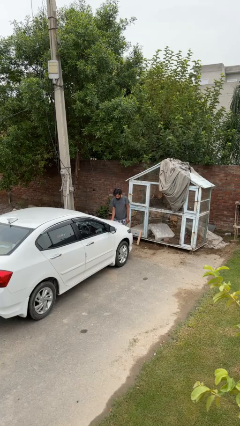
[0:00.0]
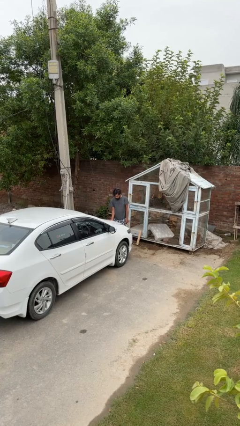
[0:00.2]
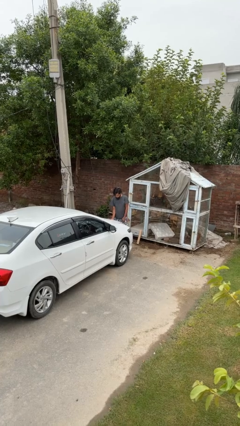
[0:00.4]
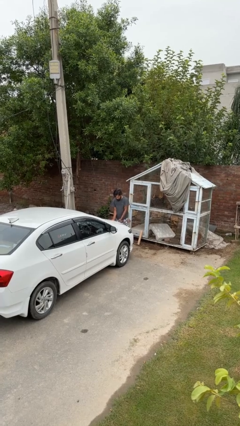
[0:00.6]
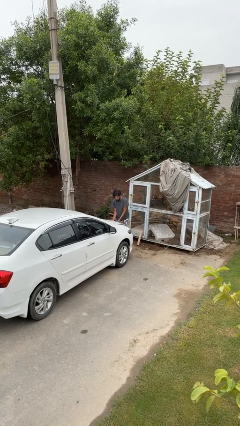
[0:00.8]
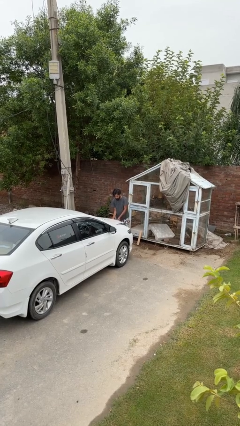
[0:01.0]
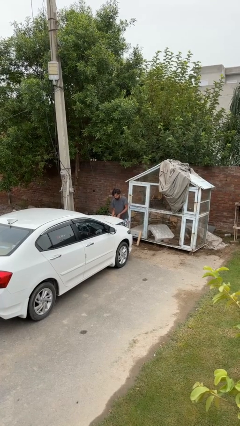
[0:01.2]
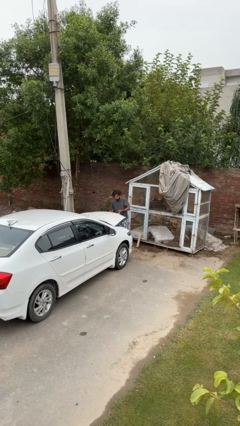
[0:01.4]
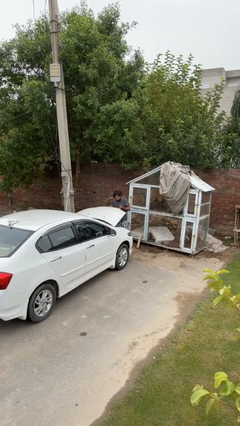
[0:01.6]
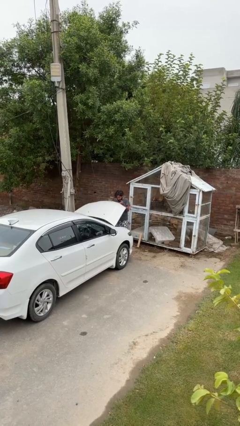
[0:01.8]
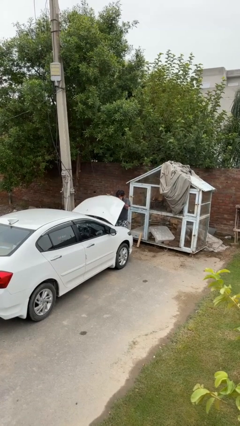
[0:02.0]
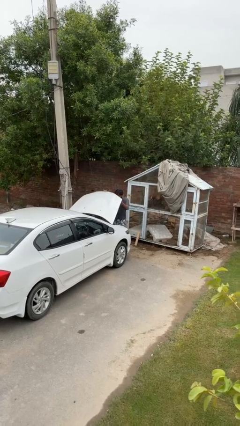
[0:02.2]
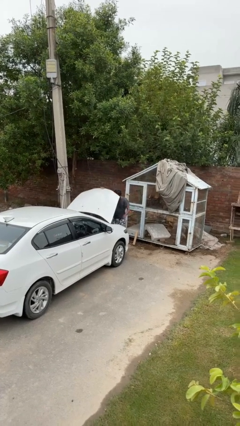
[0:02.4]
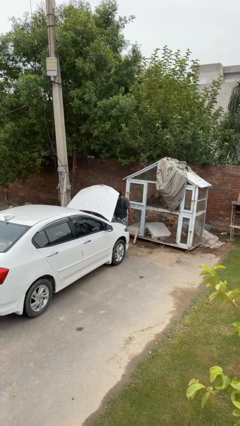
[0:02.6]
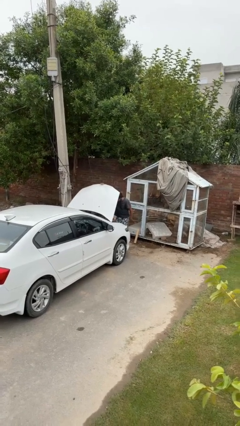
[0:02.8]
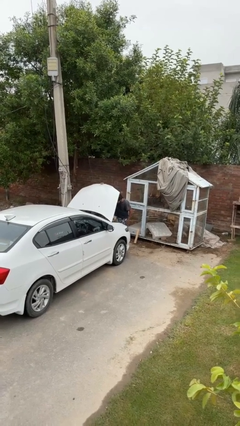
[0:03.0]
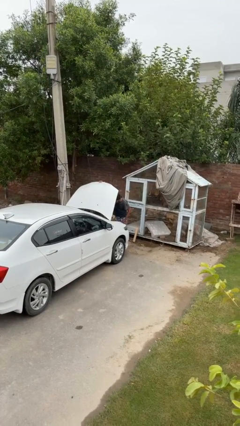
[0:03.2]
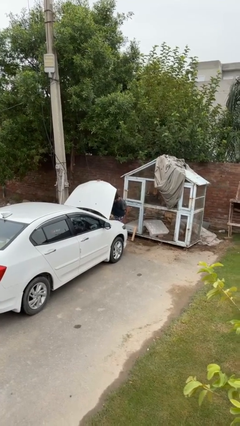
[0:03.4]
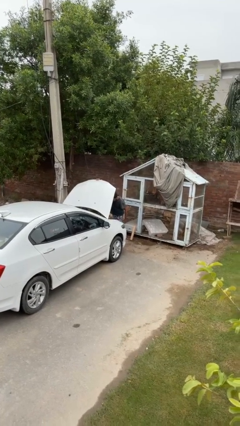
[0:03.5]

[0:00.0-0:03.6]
person opens car hood

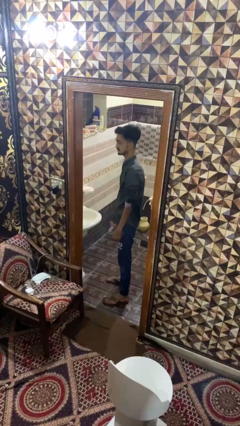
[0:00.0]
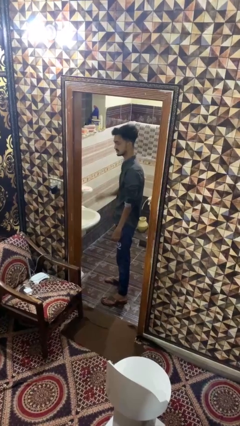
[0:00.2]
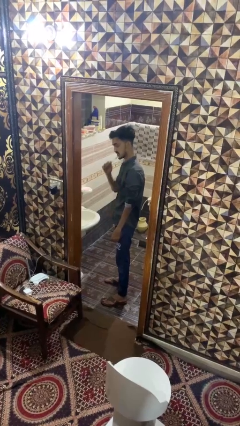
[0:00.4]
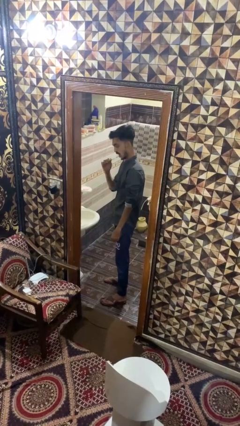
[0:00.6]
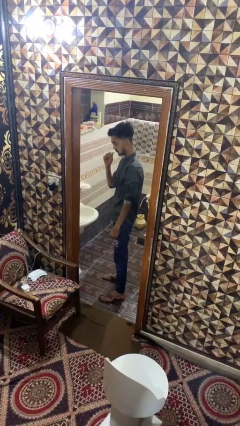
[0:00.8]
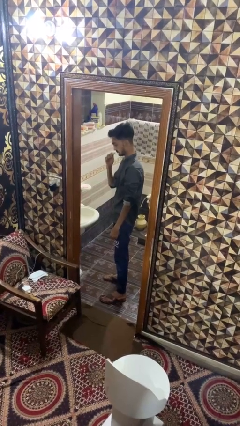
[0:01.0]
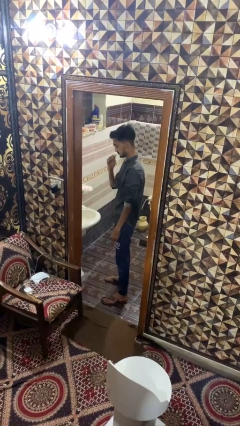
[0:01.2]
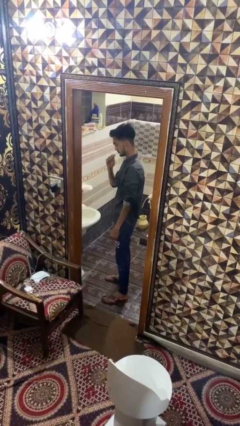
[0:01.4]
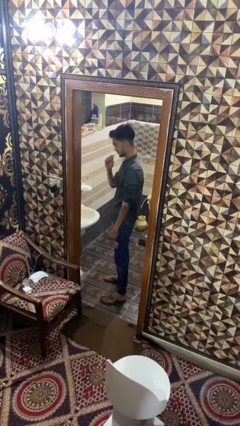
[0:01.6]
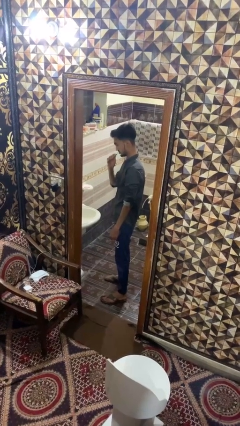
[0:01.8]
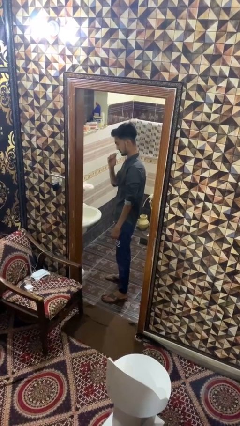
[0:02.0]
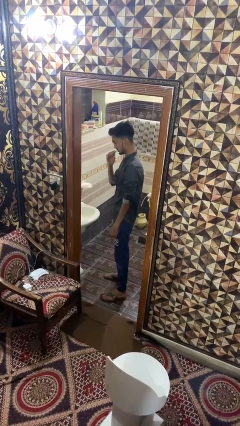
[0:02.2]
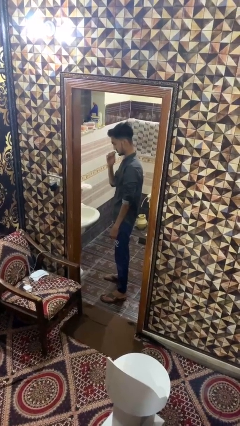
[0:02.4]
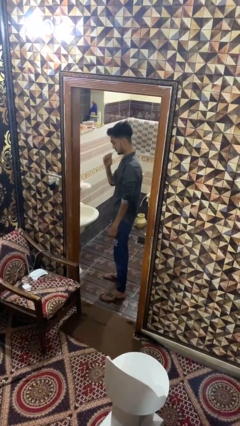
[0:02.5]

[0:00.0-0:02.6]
person brushes teeth

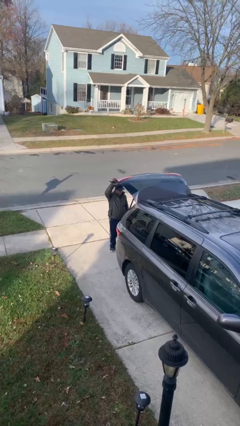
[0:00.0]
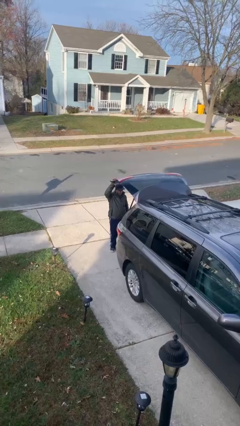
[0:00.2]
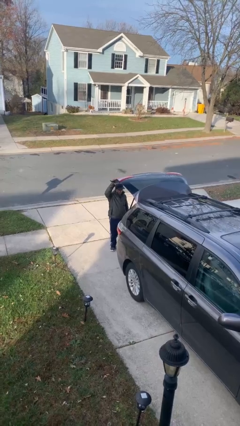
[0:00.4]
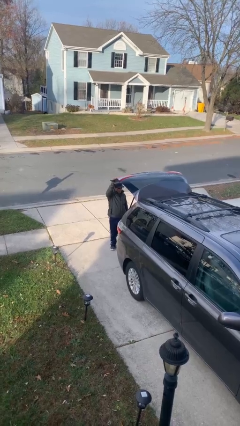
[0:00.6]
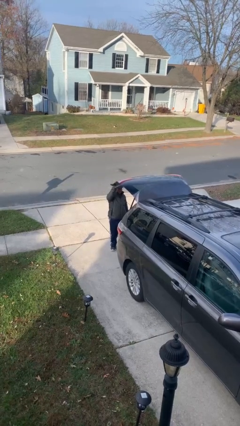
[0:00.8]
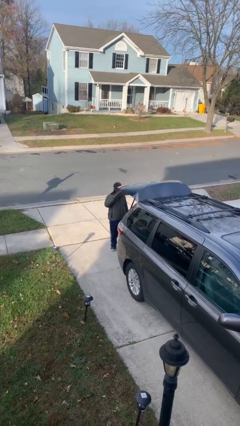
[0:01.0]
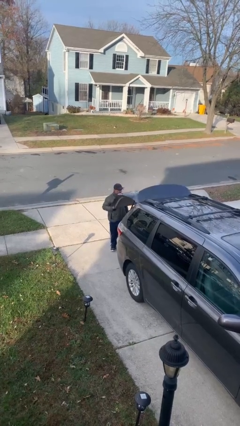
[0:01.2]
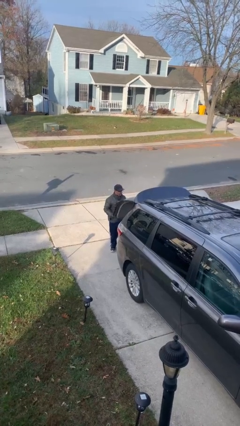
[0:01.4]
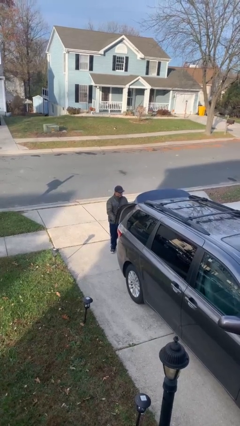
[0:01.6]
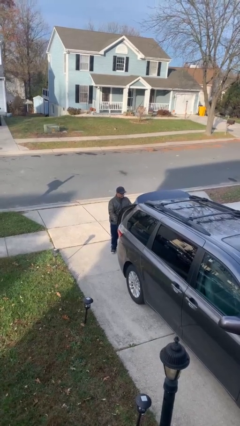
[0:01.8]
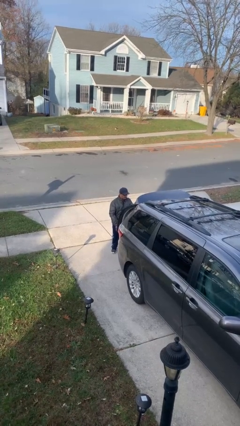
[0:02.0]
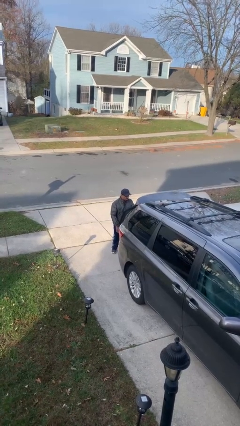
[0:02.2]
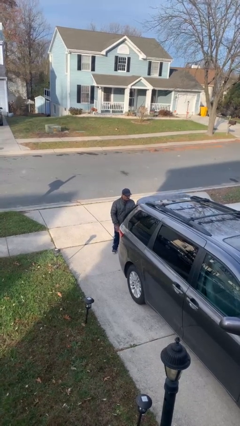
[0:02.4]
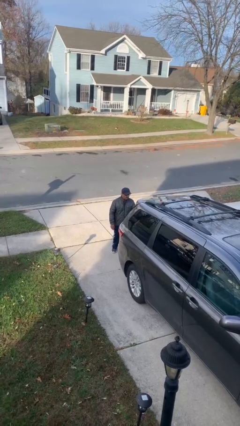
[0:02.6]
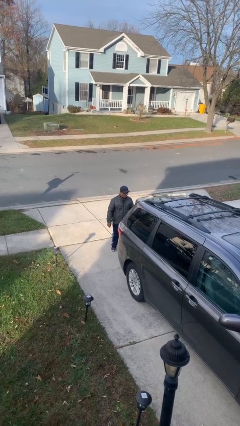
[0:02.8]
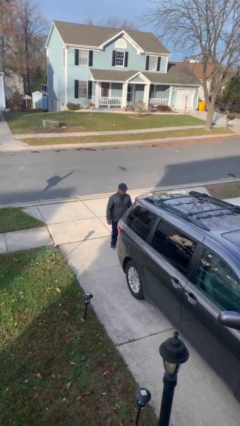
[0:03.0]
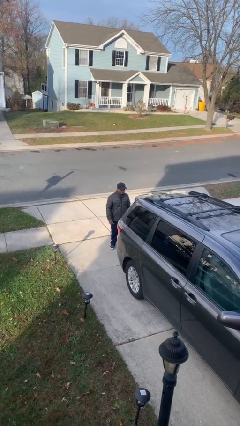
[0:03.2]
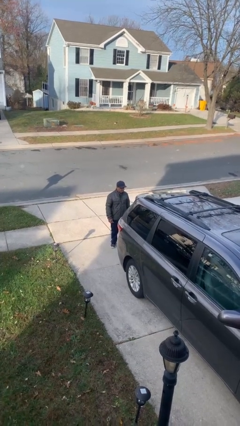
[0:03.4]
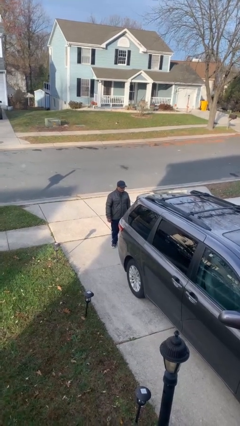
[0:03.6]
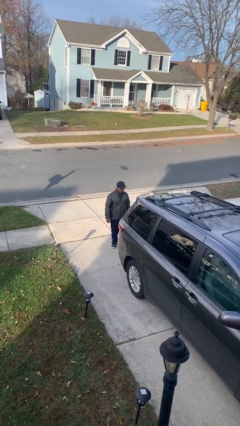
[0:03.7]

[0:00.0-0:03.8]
person closes car trunk

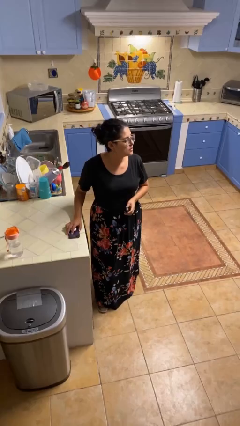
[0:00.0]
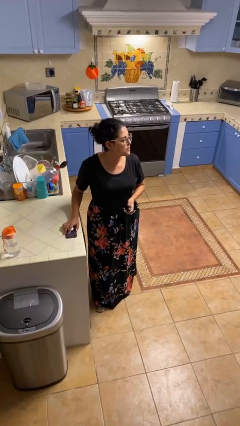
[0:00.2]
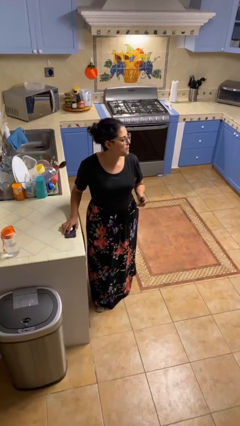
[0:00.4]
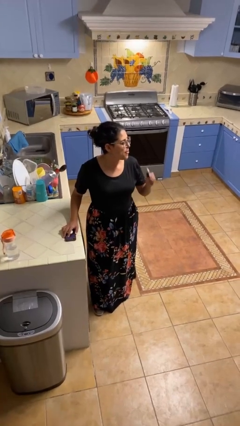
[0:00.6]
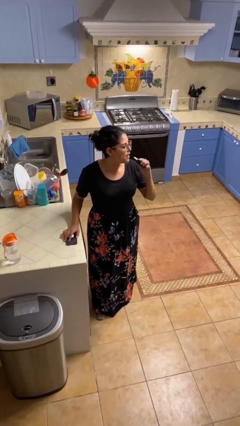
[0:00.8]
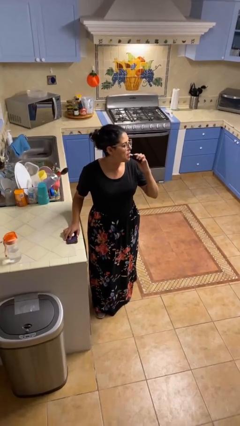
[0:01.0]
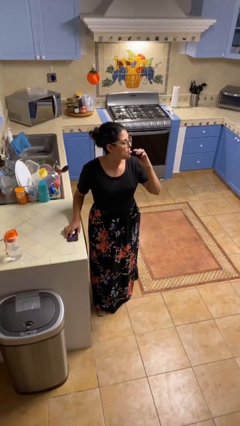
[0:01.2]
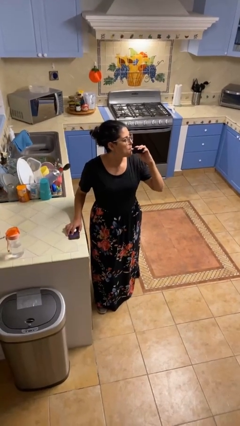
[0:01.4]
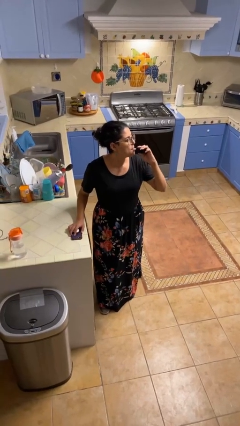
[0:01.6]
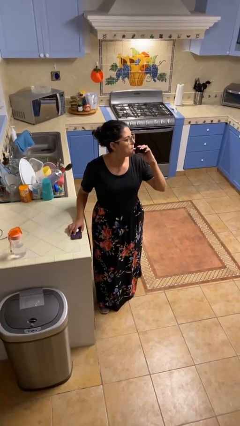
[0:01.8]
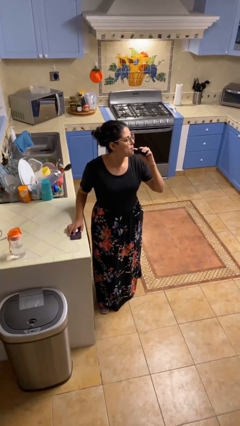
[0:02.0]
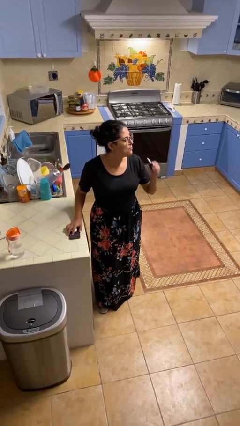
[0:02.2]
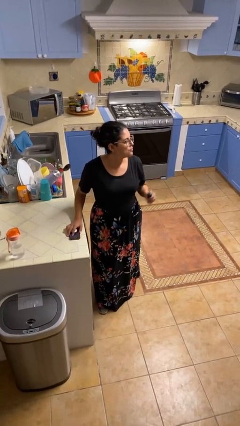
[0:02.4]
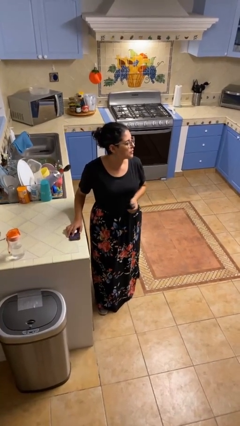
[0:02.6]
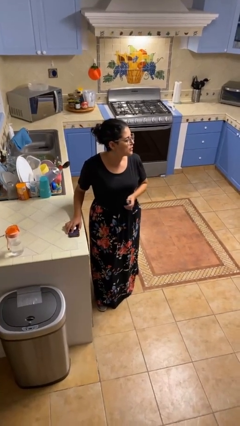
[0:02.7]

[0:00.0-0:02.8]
person vapes

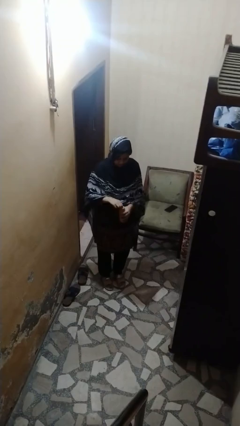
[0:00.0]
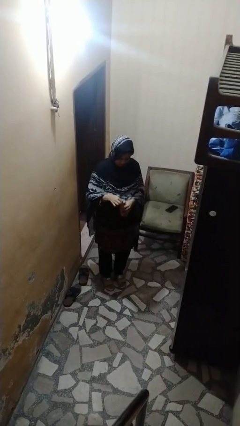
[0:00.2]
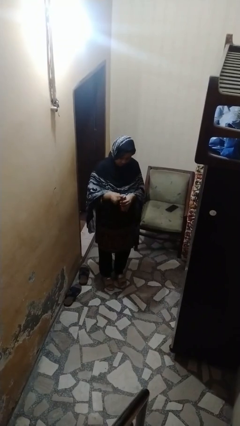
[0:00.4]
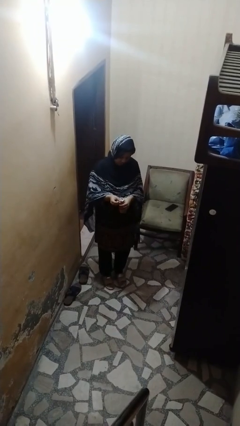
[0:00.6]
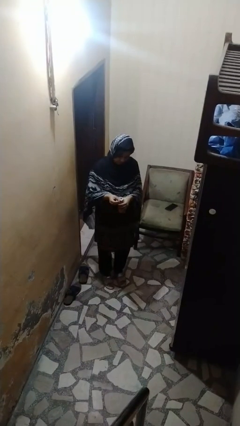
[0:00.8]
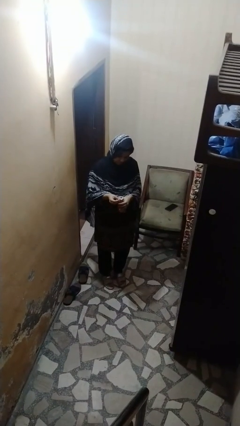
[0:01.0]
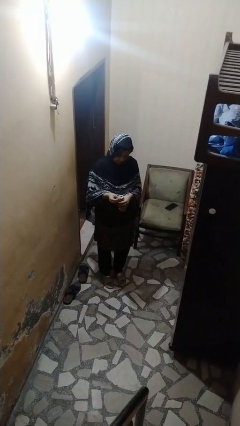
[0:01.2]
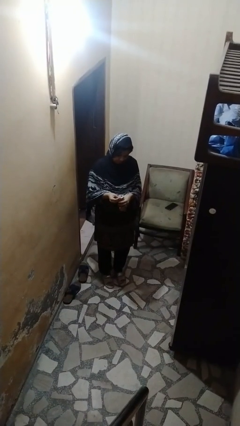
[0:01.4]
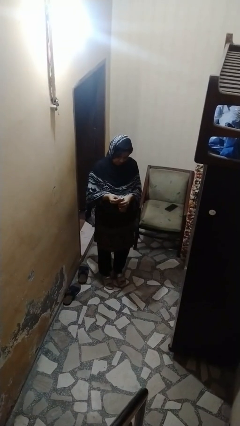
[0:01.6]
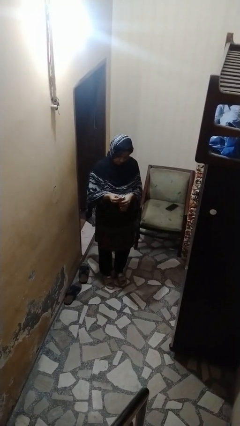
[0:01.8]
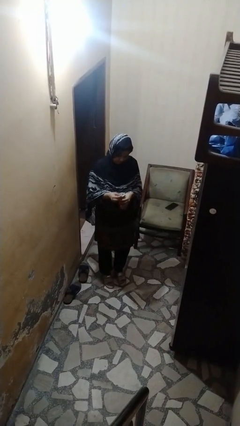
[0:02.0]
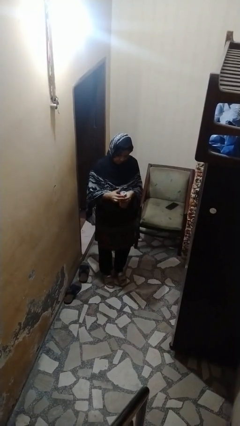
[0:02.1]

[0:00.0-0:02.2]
person opens beverage can

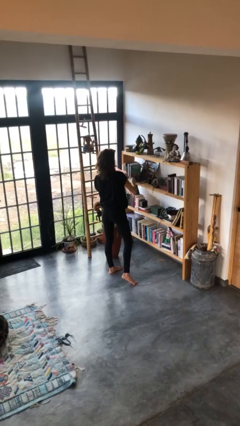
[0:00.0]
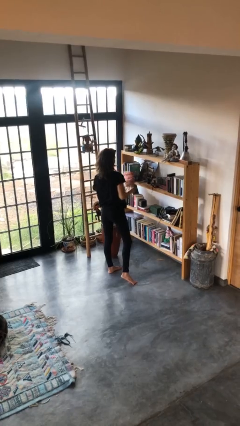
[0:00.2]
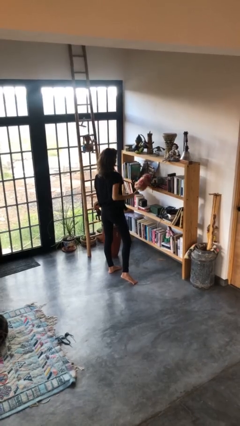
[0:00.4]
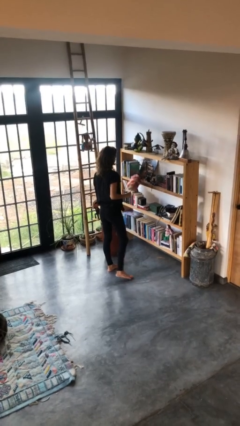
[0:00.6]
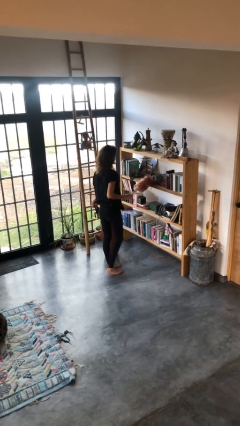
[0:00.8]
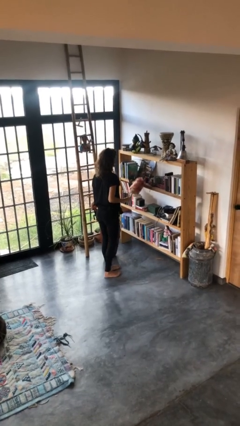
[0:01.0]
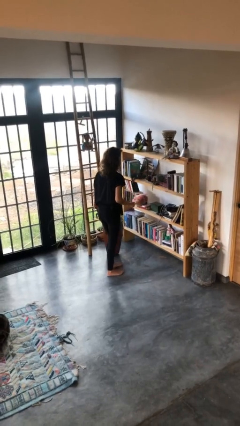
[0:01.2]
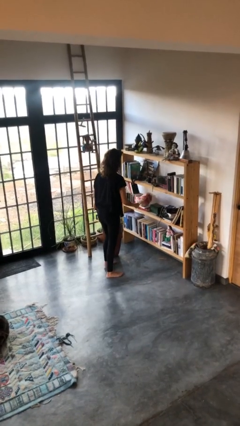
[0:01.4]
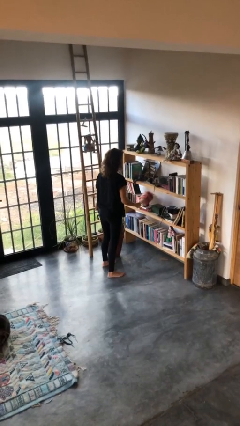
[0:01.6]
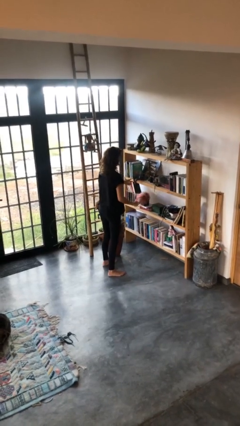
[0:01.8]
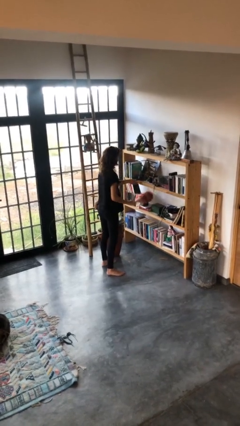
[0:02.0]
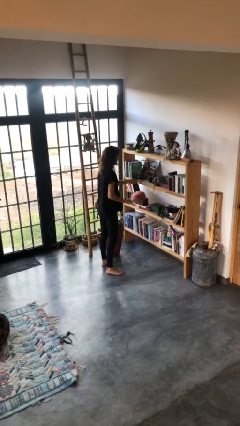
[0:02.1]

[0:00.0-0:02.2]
person dusts furniture
